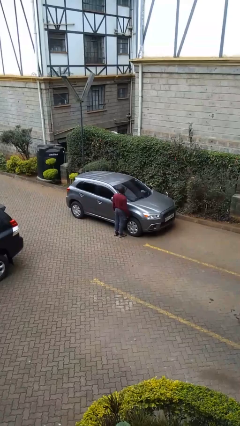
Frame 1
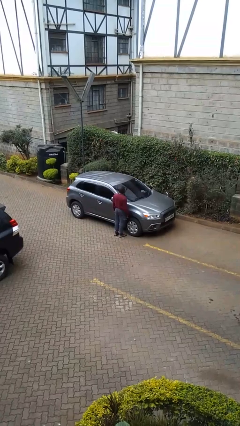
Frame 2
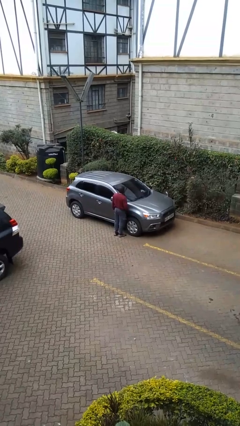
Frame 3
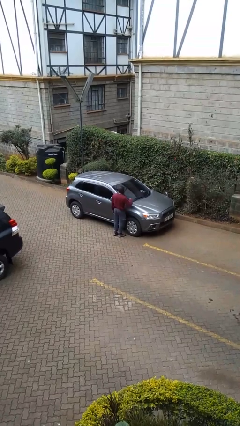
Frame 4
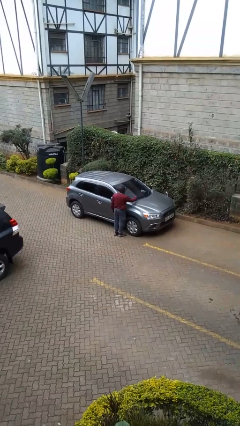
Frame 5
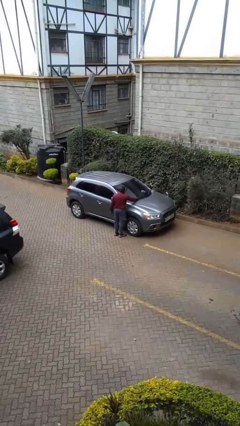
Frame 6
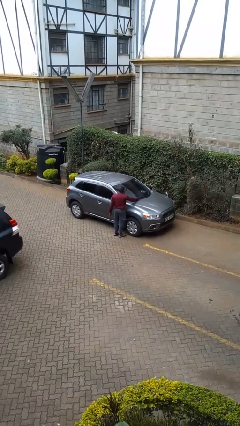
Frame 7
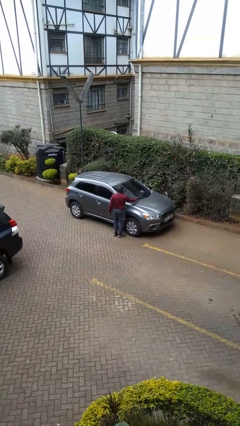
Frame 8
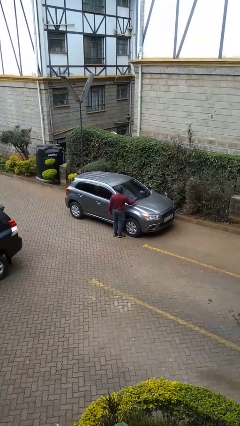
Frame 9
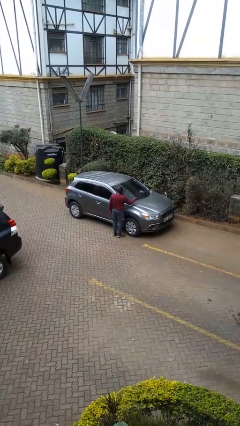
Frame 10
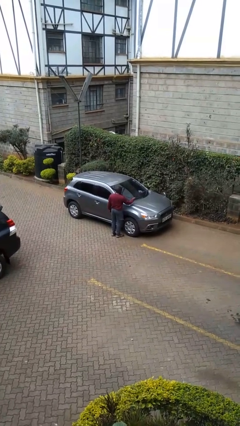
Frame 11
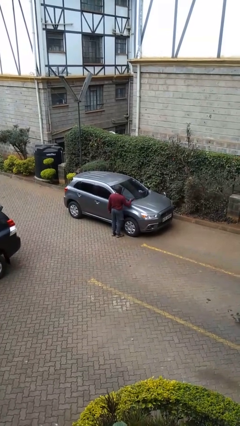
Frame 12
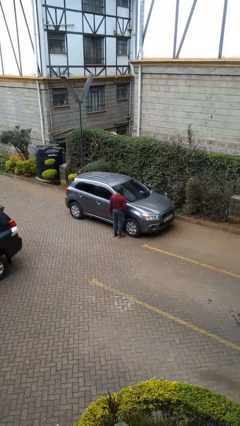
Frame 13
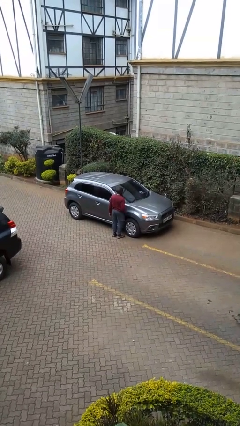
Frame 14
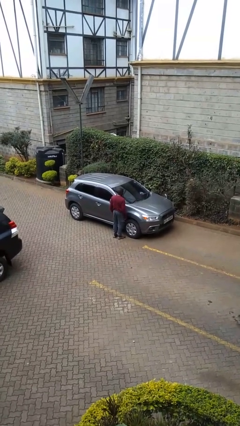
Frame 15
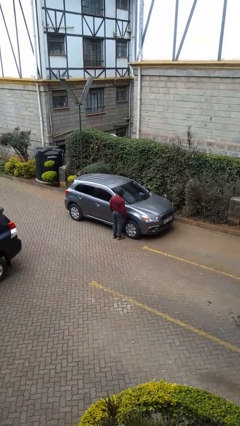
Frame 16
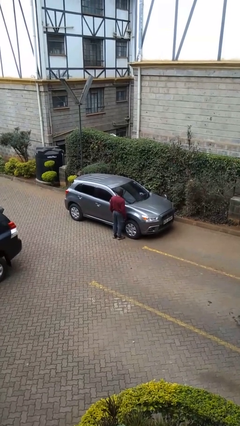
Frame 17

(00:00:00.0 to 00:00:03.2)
person flips up car wipers

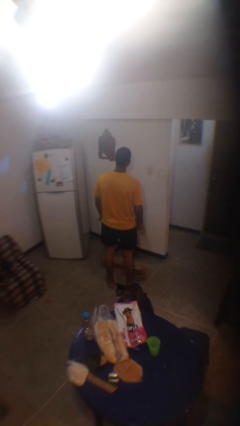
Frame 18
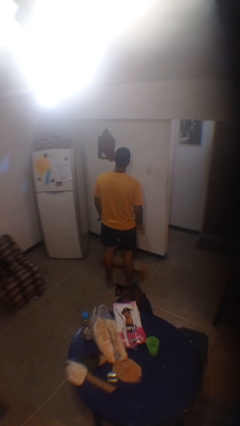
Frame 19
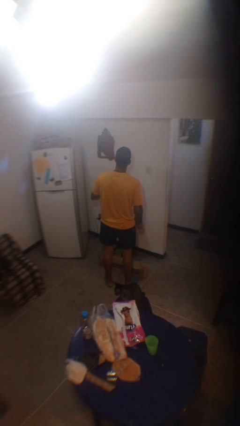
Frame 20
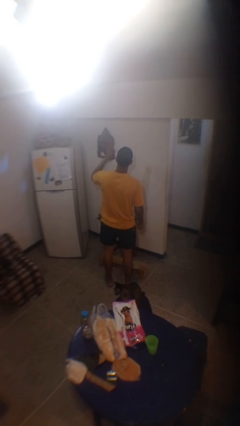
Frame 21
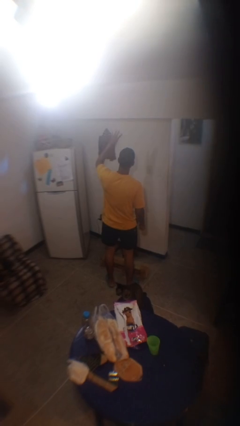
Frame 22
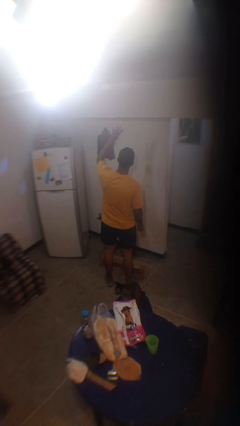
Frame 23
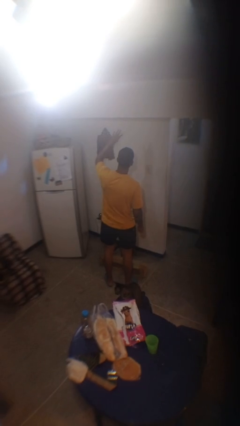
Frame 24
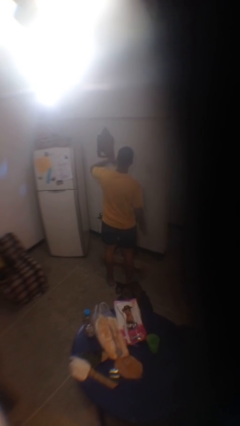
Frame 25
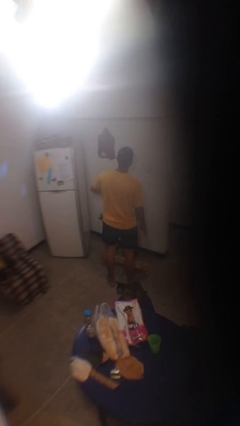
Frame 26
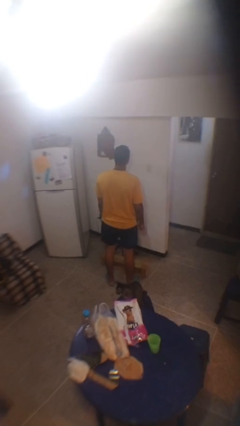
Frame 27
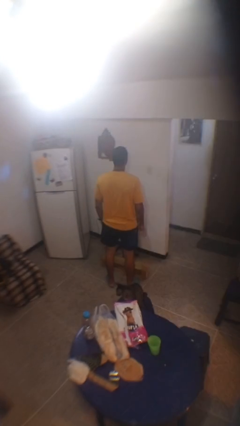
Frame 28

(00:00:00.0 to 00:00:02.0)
person gestures number four

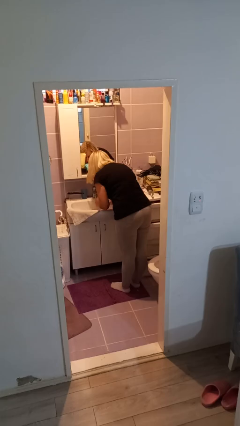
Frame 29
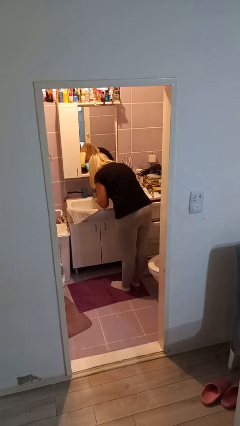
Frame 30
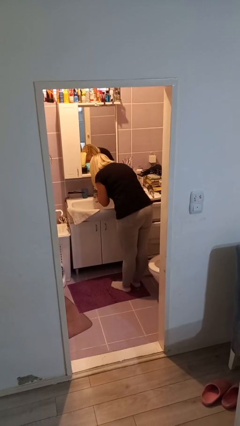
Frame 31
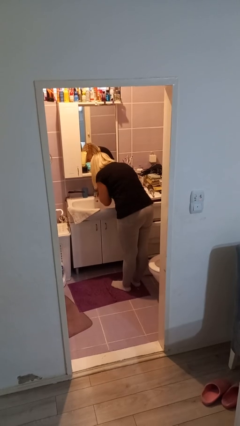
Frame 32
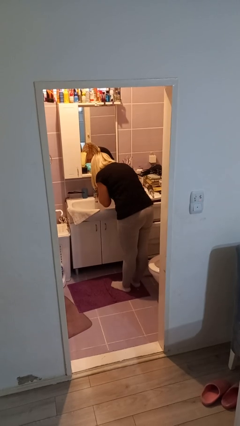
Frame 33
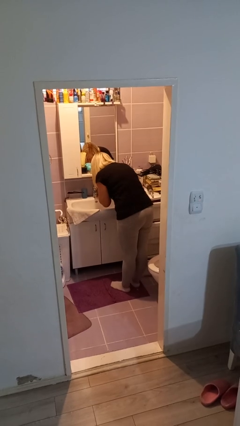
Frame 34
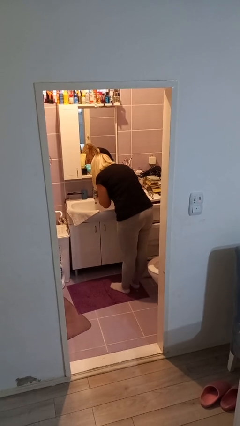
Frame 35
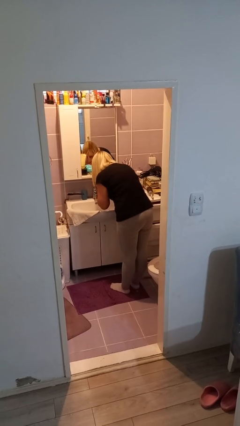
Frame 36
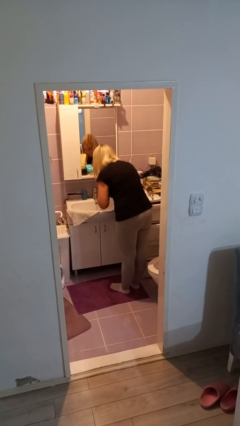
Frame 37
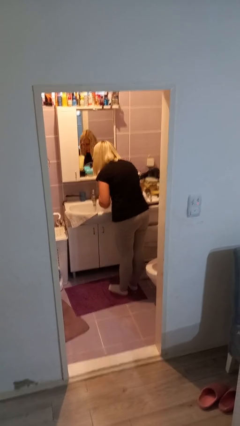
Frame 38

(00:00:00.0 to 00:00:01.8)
person washes face

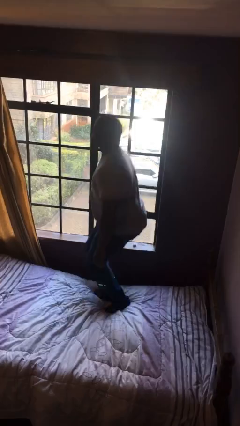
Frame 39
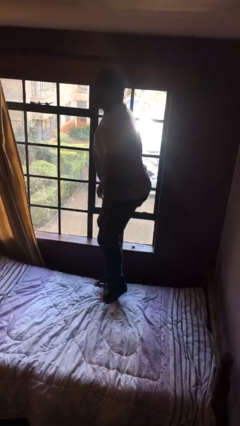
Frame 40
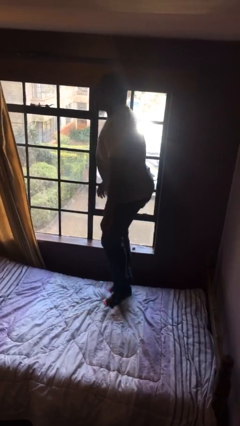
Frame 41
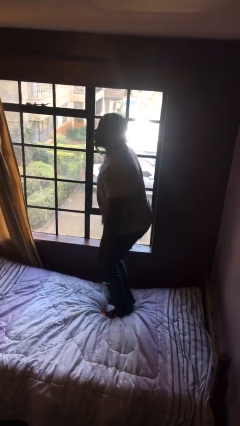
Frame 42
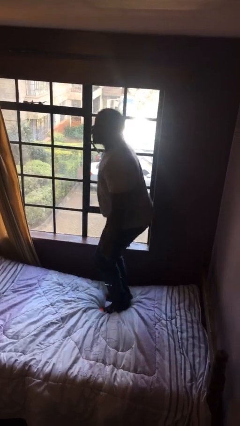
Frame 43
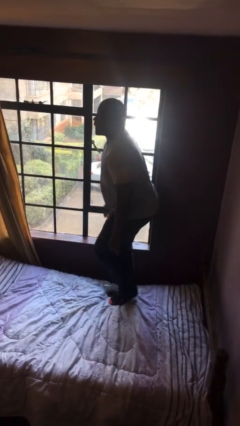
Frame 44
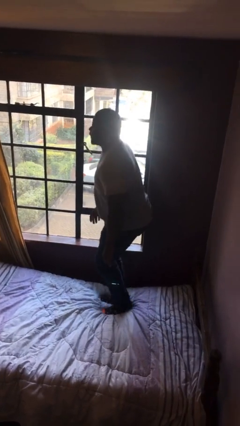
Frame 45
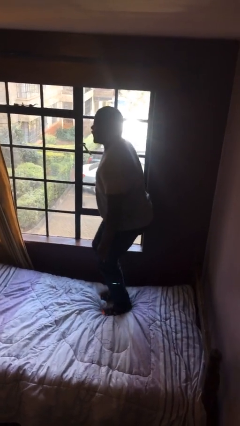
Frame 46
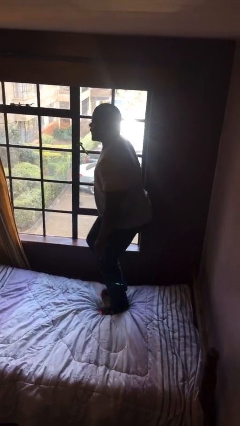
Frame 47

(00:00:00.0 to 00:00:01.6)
person jumps on bed

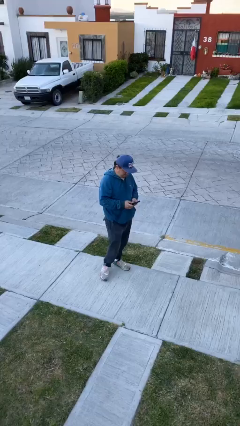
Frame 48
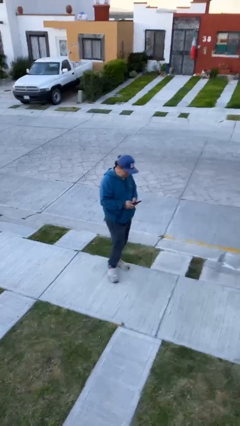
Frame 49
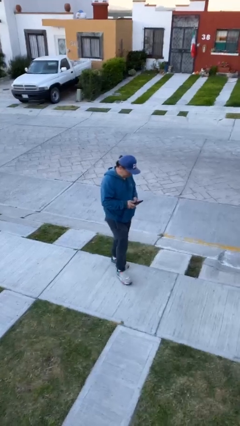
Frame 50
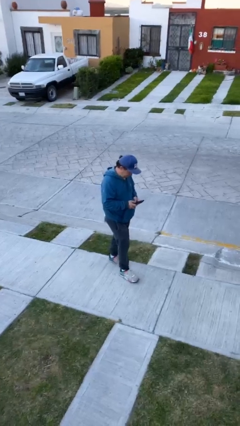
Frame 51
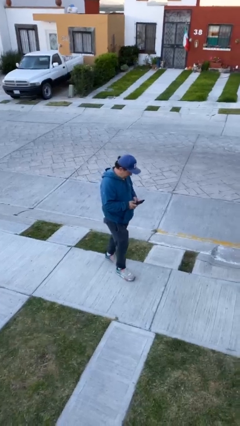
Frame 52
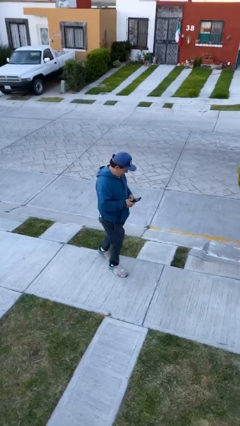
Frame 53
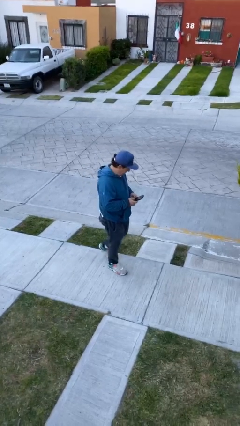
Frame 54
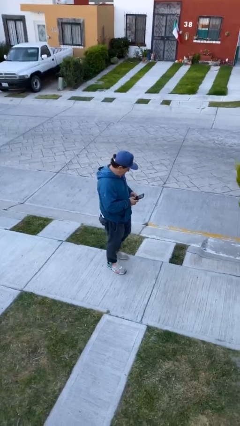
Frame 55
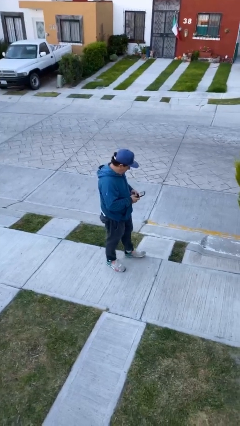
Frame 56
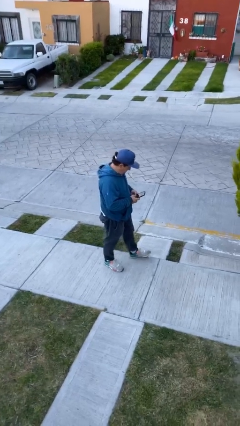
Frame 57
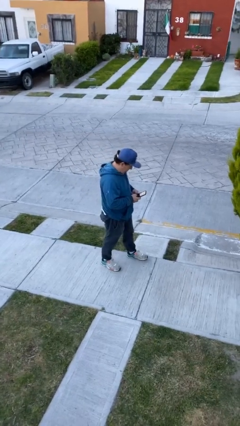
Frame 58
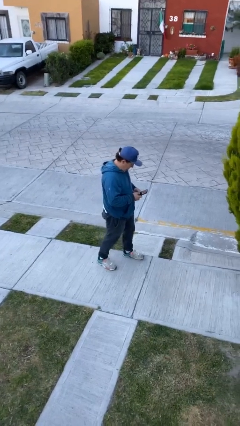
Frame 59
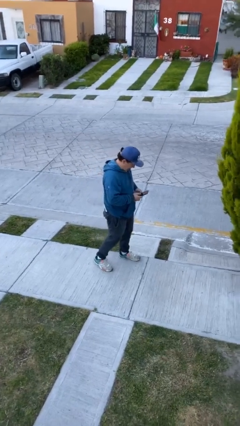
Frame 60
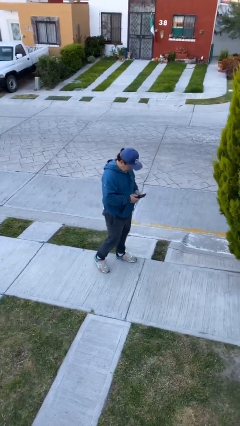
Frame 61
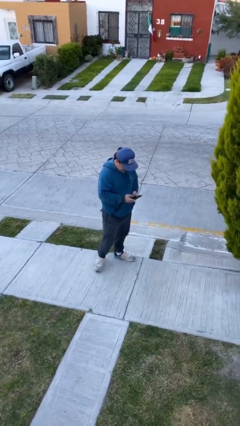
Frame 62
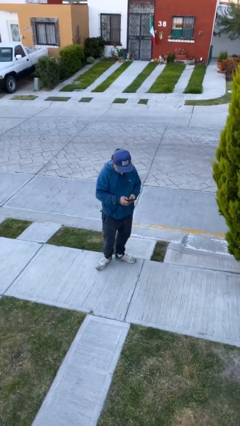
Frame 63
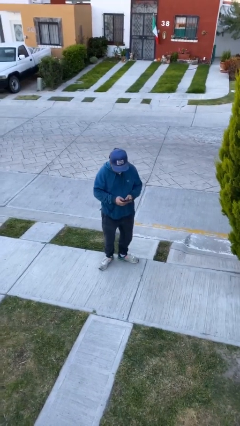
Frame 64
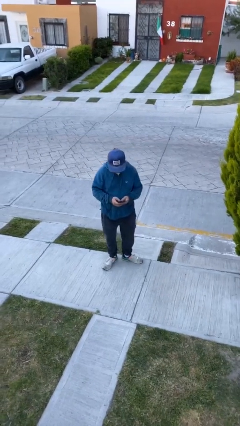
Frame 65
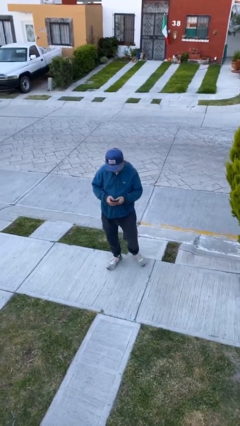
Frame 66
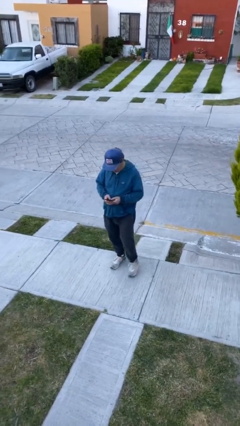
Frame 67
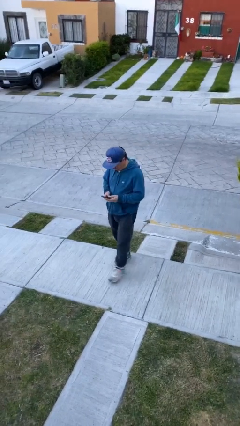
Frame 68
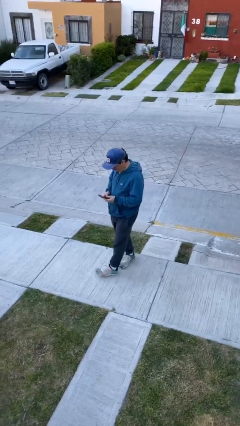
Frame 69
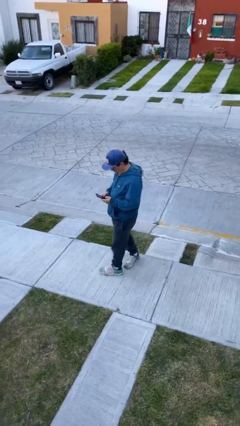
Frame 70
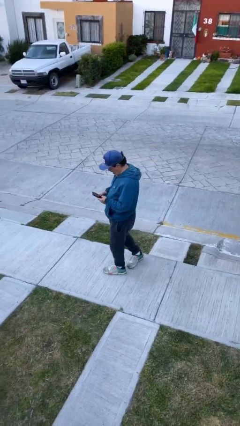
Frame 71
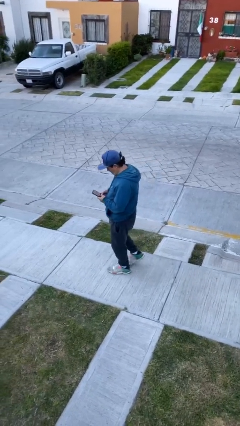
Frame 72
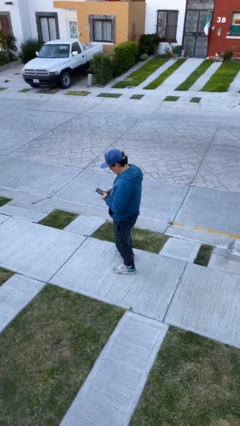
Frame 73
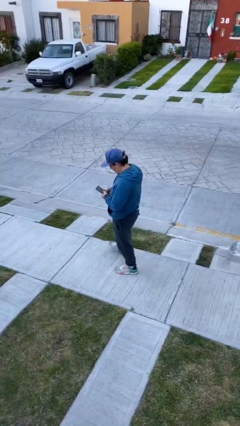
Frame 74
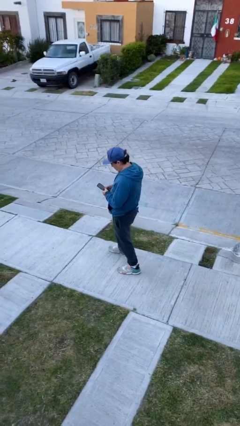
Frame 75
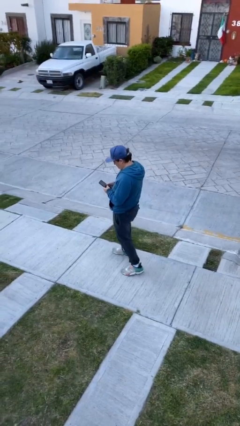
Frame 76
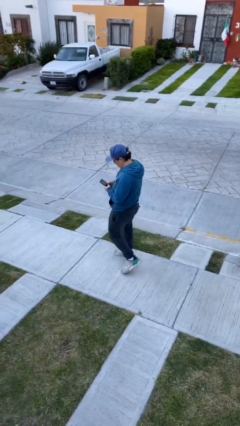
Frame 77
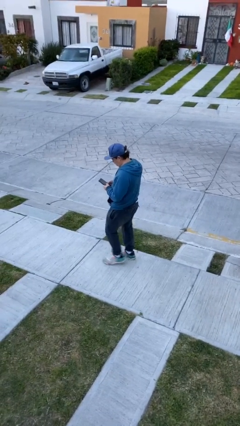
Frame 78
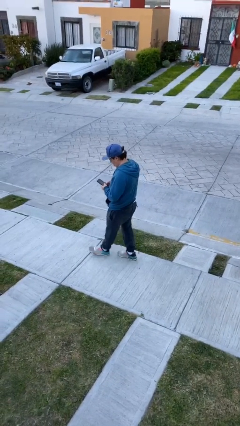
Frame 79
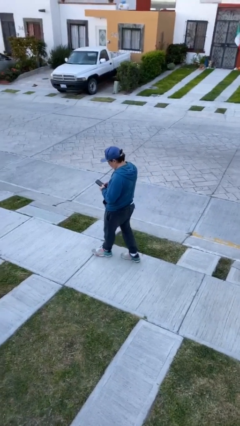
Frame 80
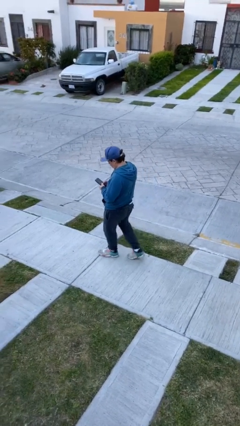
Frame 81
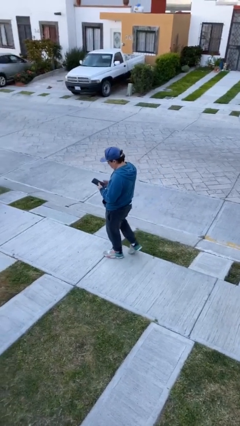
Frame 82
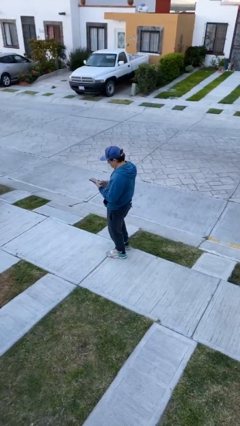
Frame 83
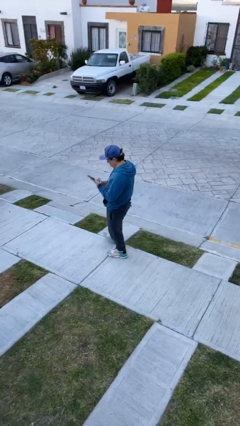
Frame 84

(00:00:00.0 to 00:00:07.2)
person texts on phone

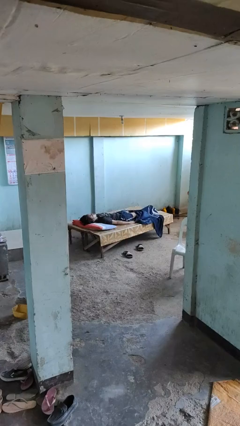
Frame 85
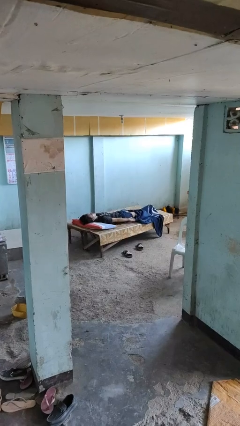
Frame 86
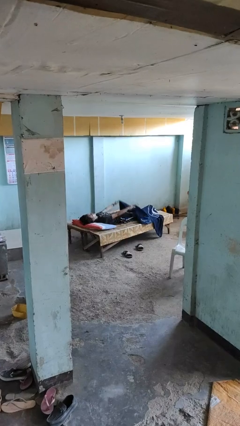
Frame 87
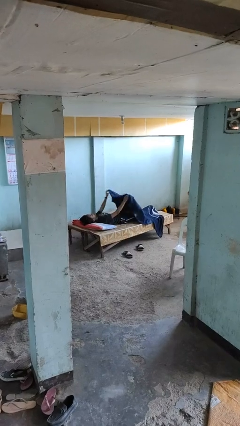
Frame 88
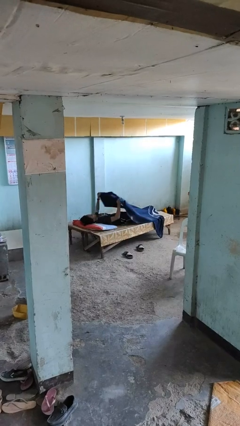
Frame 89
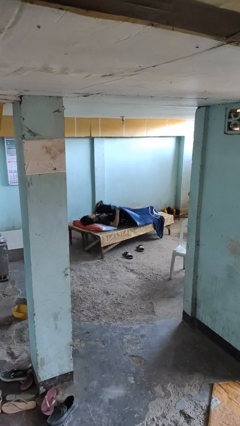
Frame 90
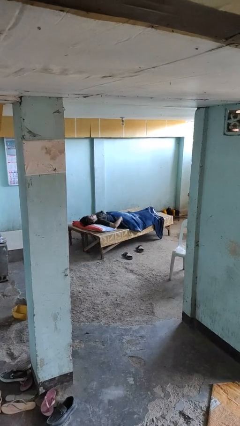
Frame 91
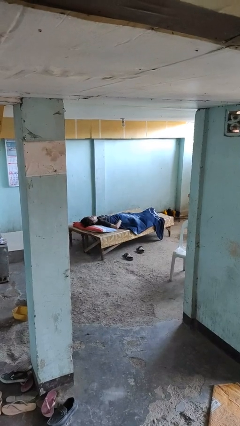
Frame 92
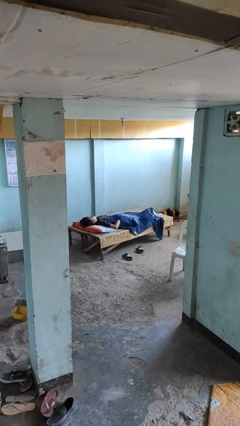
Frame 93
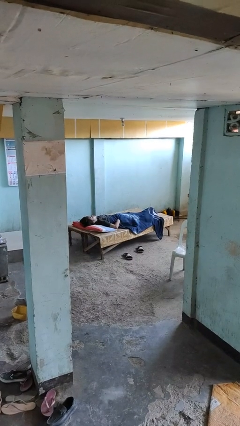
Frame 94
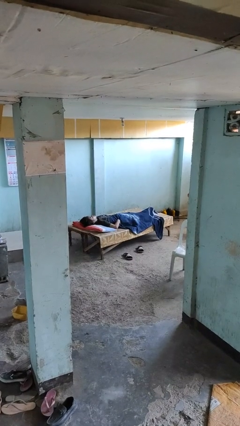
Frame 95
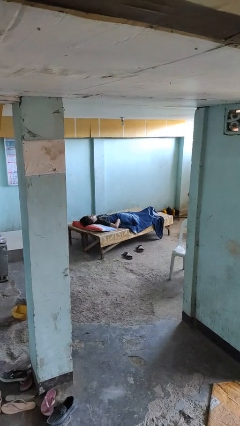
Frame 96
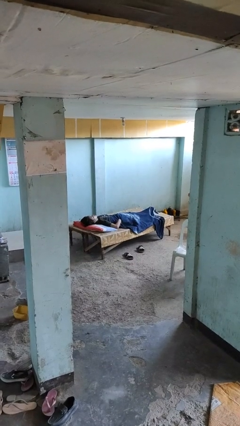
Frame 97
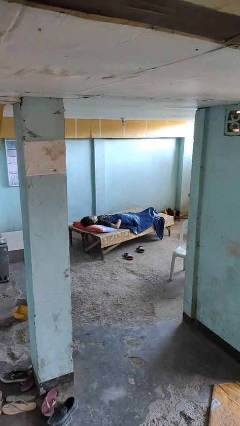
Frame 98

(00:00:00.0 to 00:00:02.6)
person covers with blanket
